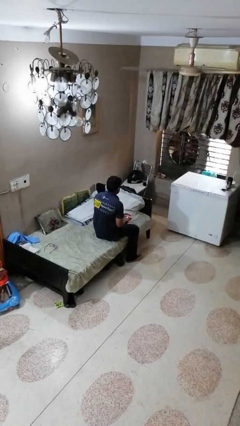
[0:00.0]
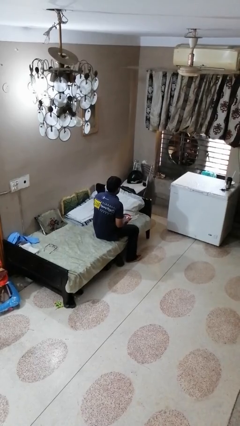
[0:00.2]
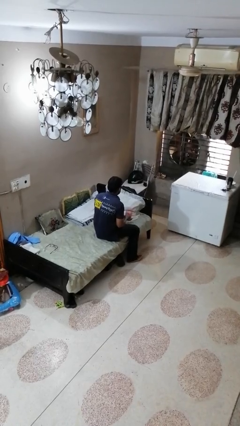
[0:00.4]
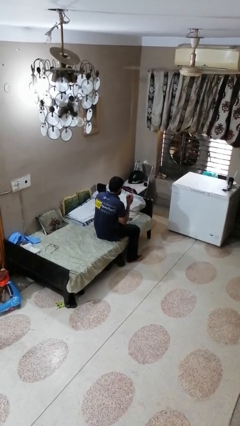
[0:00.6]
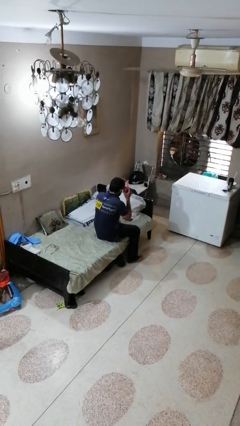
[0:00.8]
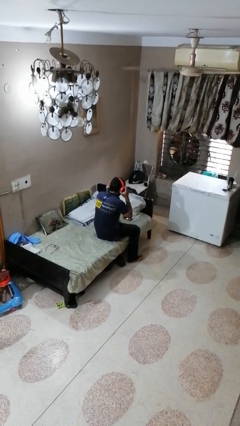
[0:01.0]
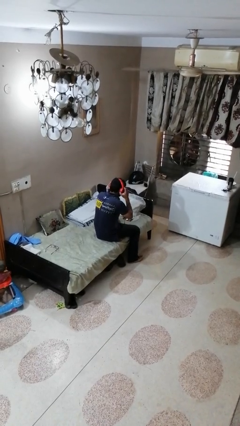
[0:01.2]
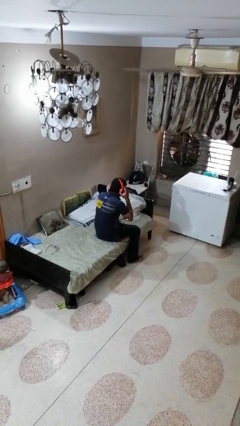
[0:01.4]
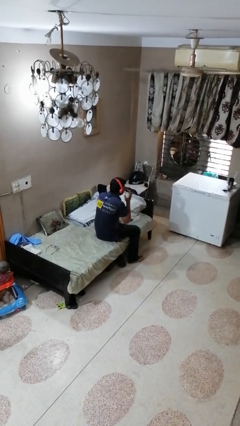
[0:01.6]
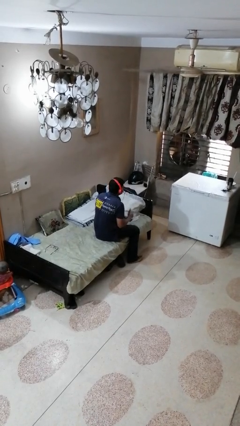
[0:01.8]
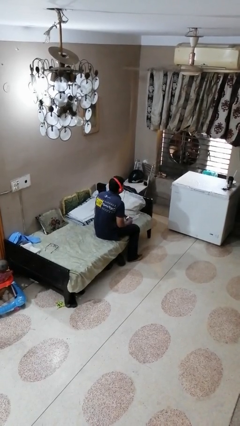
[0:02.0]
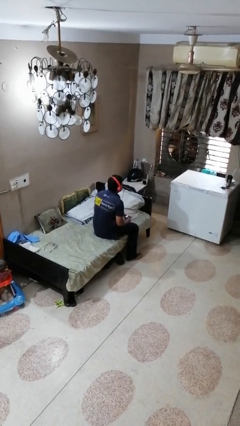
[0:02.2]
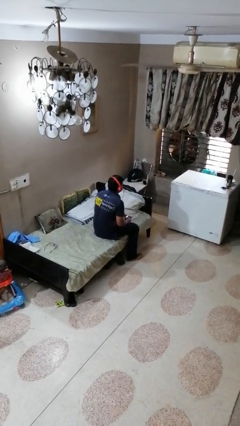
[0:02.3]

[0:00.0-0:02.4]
person puts on headphones

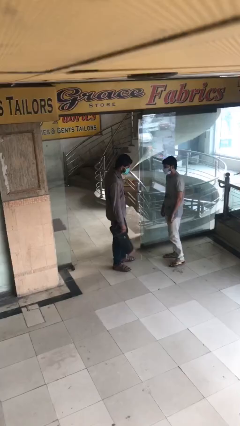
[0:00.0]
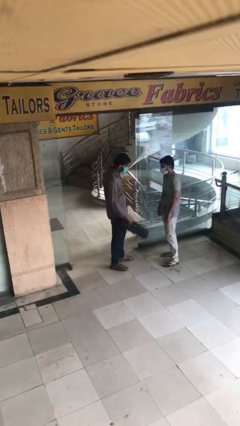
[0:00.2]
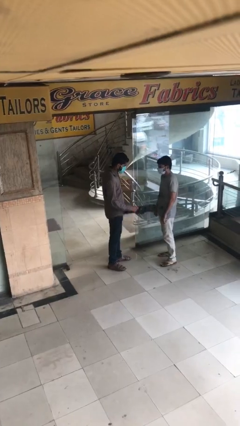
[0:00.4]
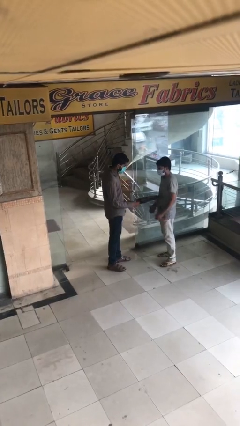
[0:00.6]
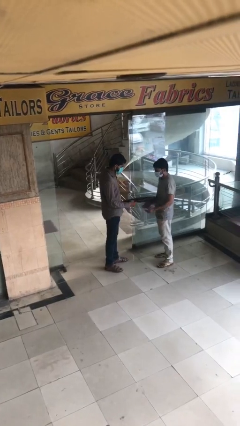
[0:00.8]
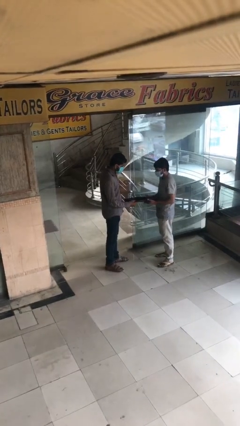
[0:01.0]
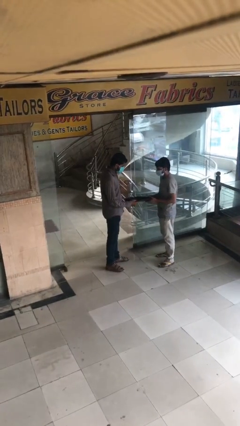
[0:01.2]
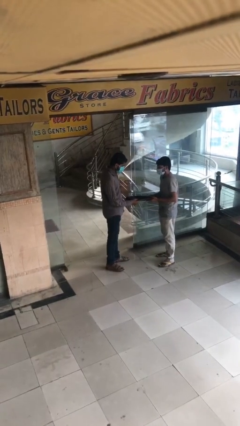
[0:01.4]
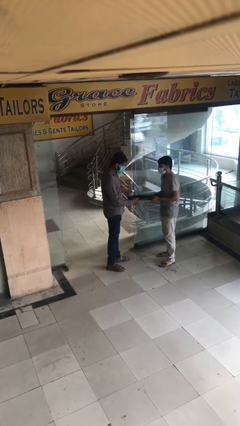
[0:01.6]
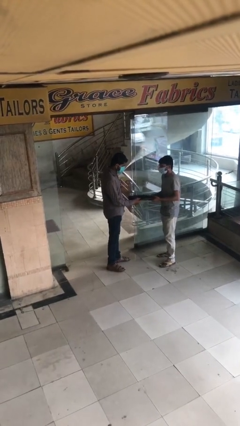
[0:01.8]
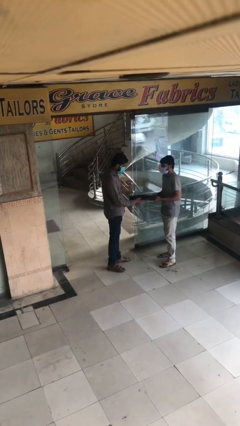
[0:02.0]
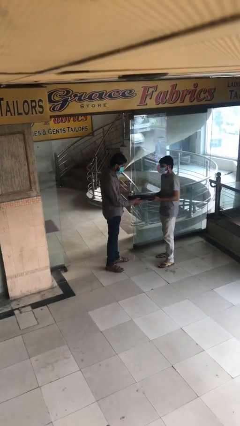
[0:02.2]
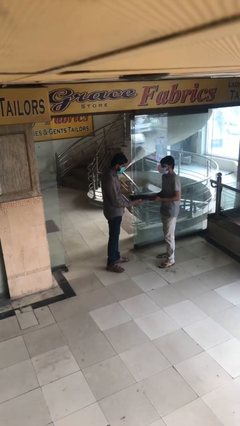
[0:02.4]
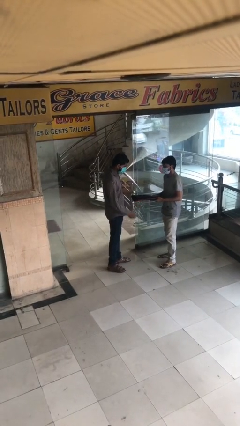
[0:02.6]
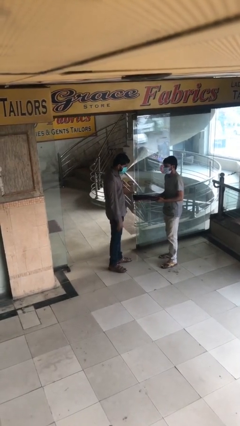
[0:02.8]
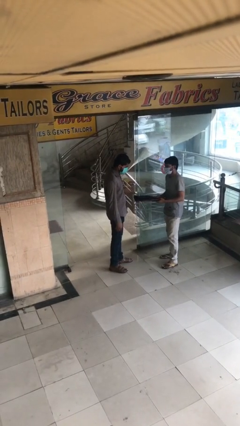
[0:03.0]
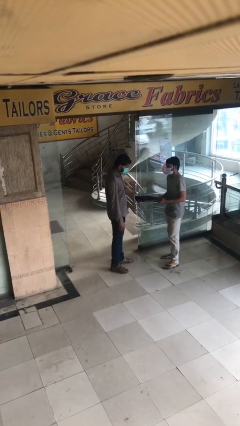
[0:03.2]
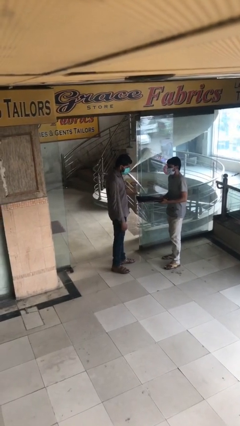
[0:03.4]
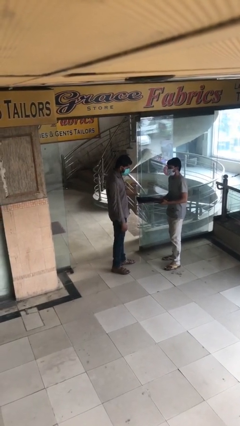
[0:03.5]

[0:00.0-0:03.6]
person transfers object to person

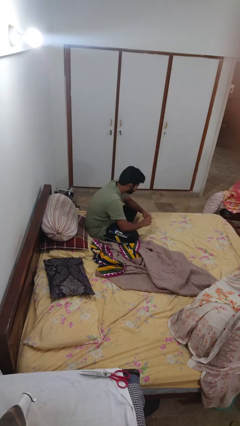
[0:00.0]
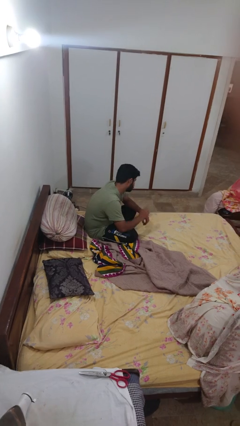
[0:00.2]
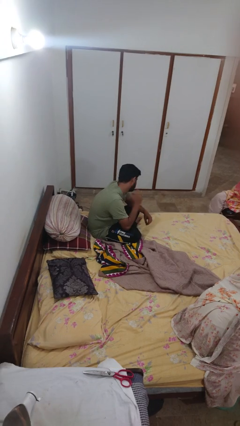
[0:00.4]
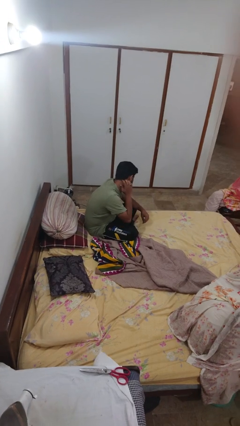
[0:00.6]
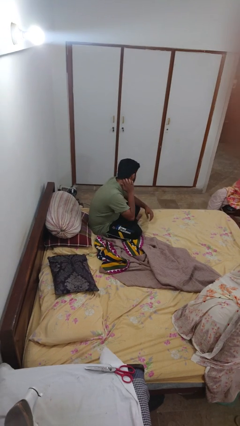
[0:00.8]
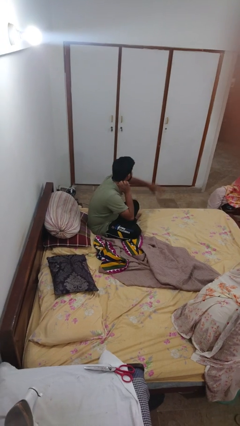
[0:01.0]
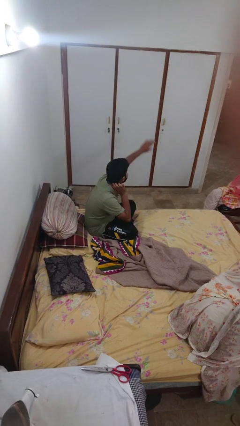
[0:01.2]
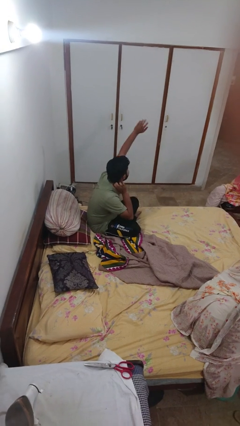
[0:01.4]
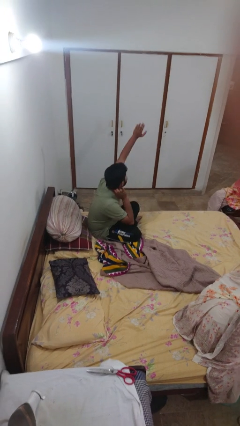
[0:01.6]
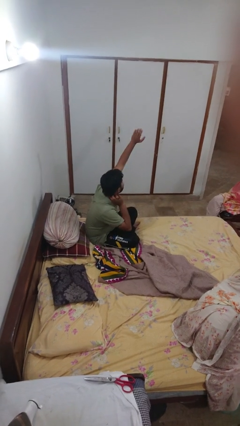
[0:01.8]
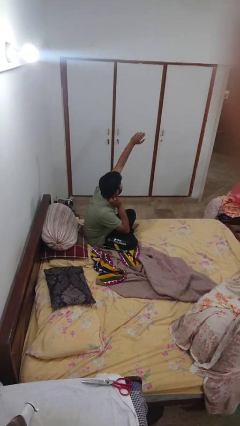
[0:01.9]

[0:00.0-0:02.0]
person waves at person

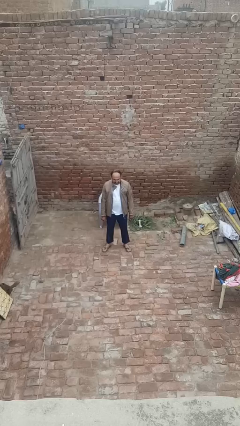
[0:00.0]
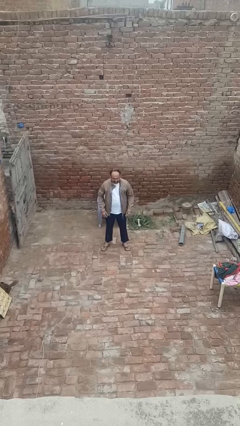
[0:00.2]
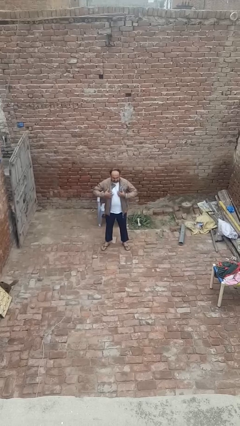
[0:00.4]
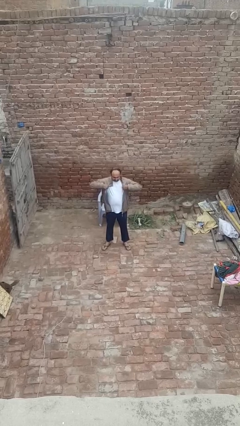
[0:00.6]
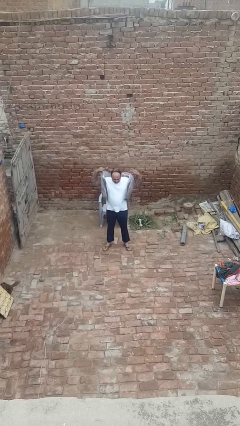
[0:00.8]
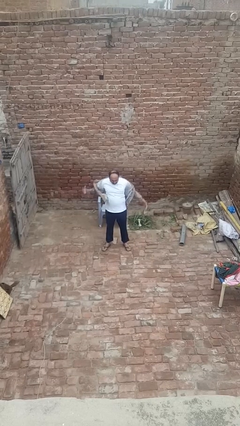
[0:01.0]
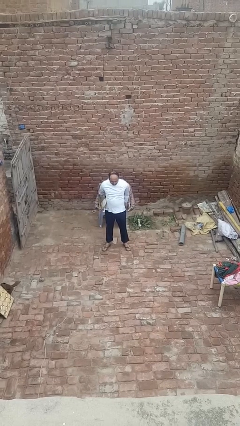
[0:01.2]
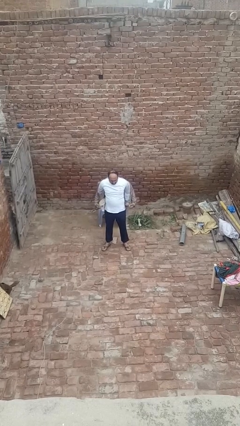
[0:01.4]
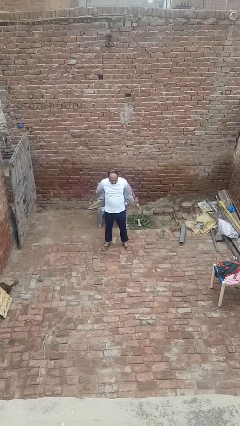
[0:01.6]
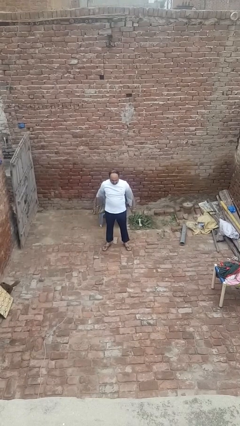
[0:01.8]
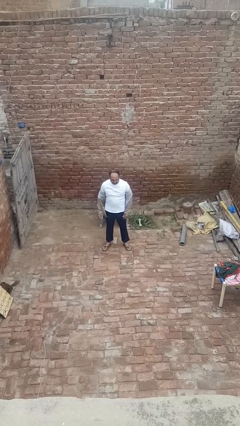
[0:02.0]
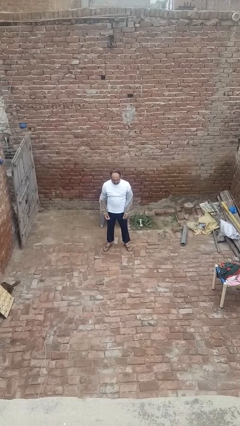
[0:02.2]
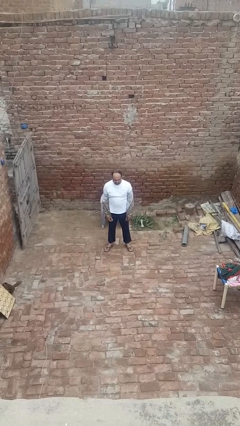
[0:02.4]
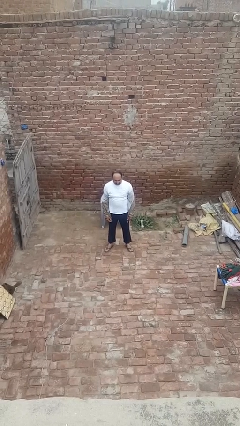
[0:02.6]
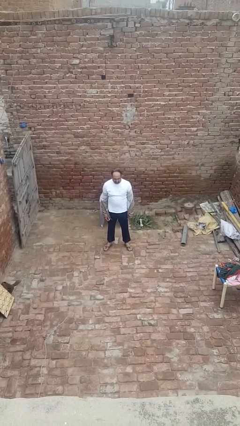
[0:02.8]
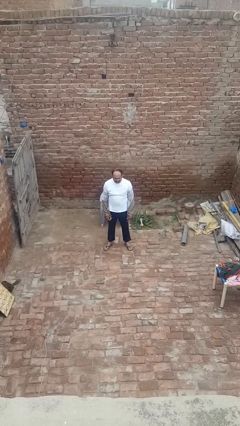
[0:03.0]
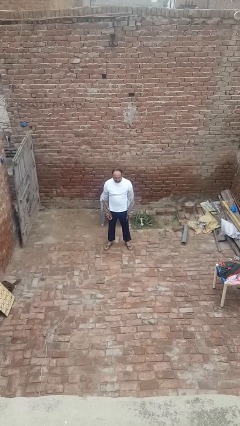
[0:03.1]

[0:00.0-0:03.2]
person takes off jacket

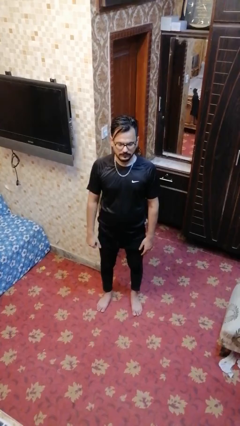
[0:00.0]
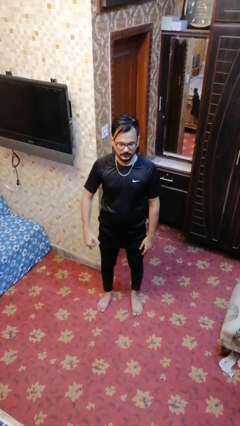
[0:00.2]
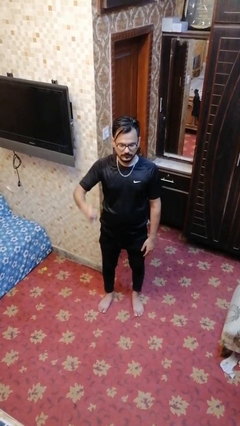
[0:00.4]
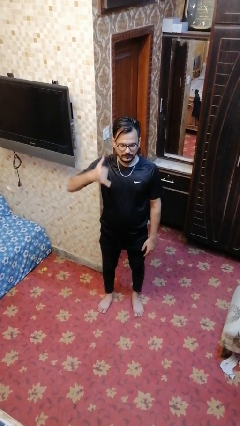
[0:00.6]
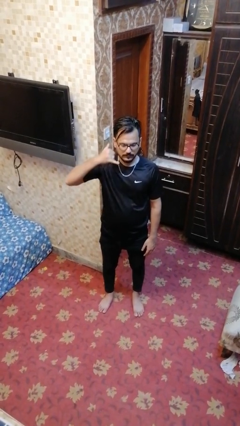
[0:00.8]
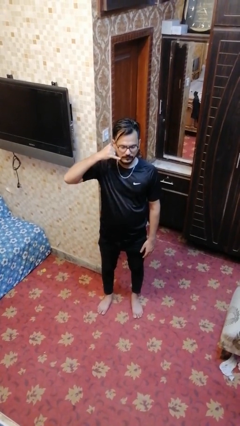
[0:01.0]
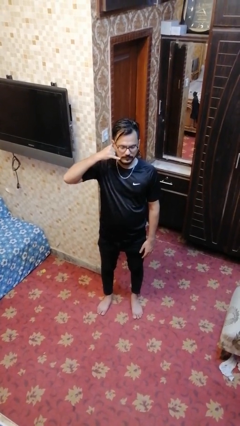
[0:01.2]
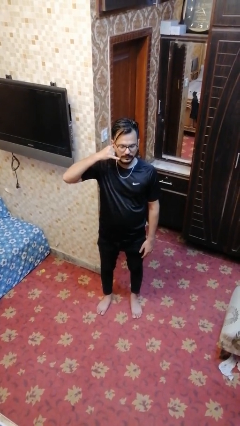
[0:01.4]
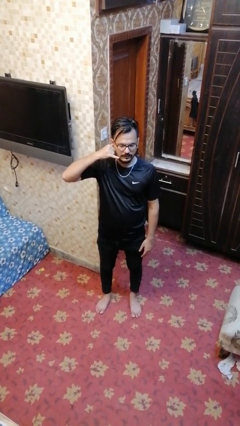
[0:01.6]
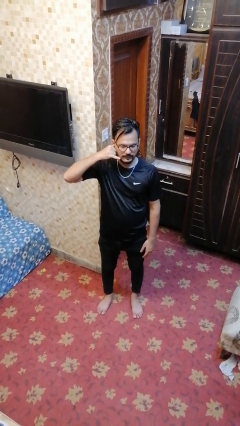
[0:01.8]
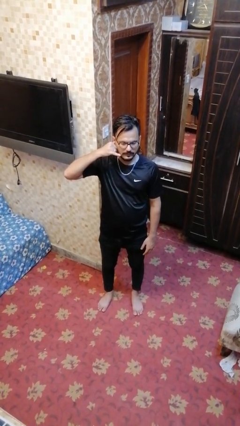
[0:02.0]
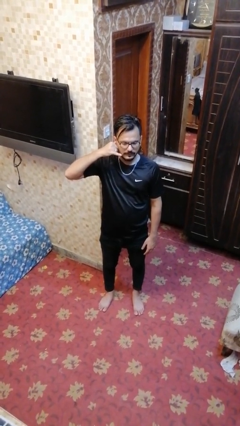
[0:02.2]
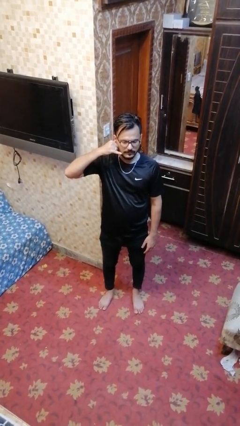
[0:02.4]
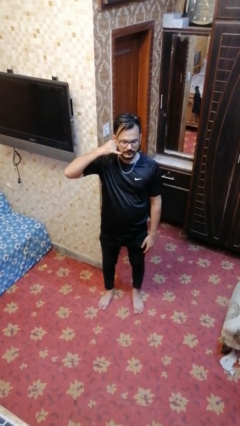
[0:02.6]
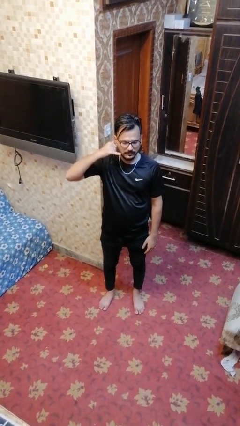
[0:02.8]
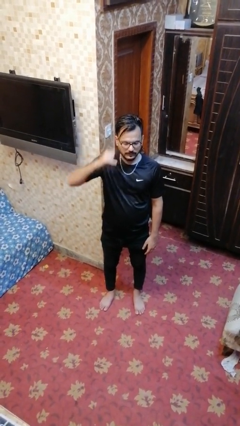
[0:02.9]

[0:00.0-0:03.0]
person gestures call me

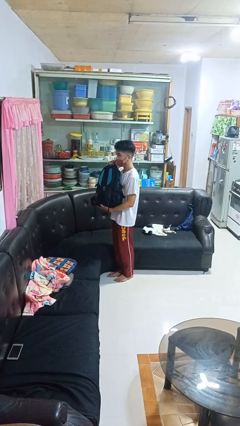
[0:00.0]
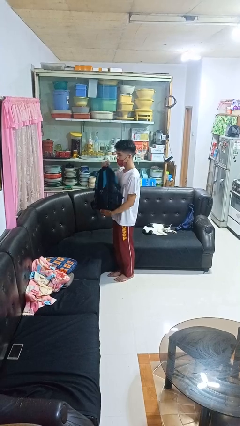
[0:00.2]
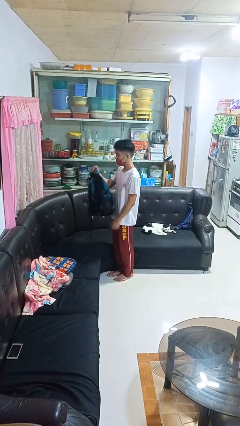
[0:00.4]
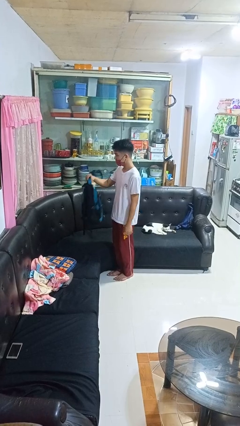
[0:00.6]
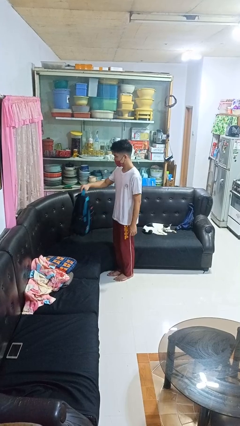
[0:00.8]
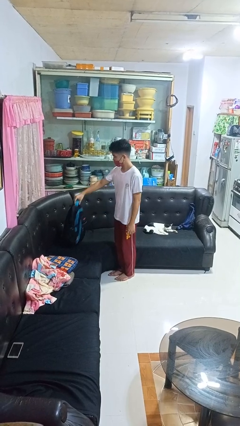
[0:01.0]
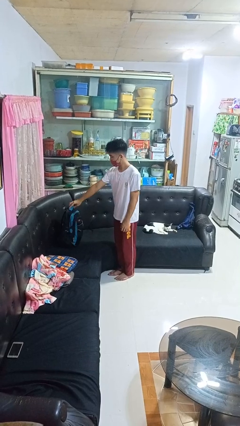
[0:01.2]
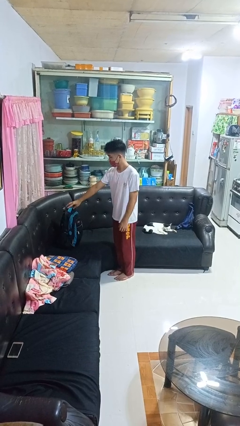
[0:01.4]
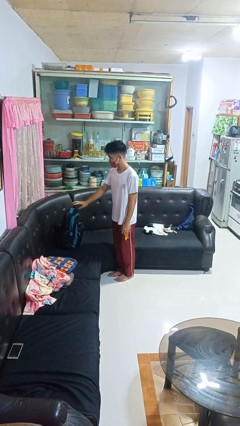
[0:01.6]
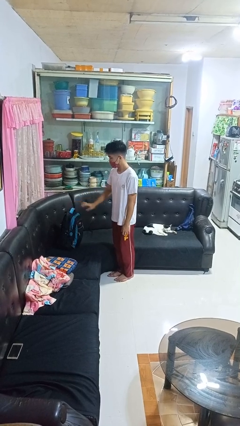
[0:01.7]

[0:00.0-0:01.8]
person puts down object on couch

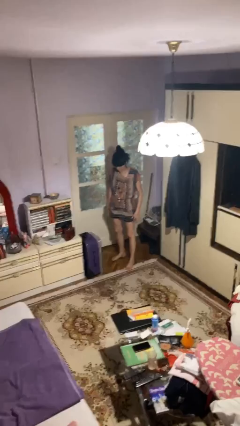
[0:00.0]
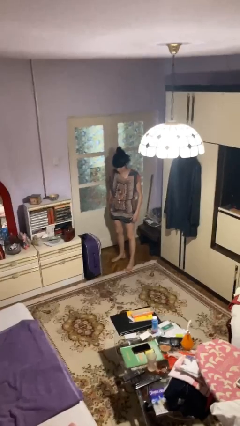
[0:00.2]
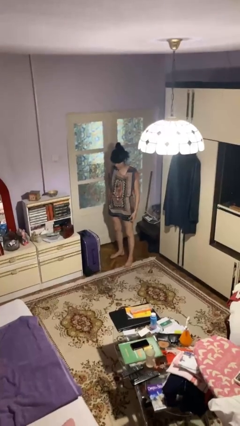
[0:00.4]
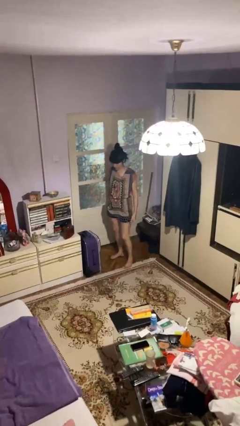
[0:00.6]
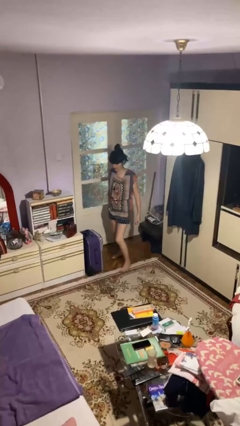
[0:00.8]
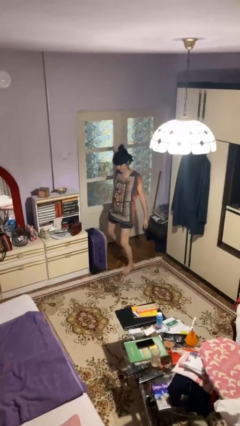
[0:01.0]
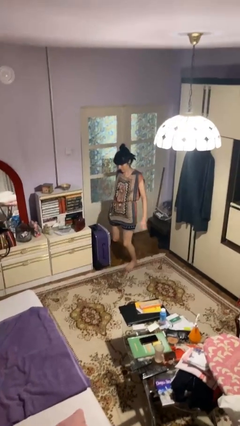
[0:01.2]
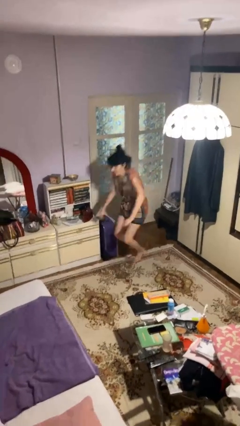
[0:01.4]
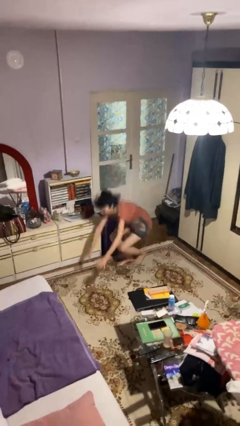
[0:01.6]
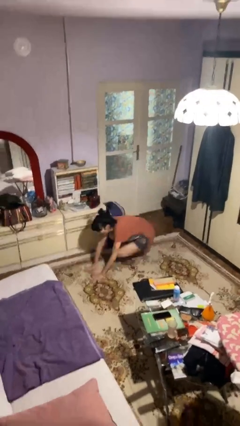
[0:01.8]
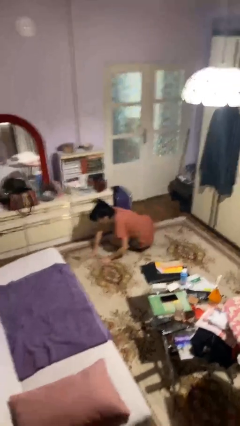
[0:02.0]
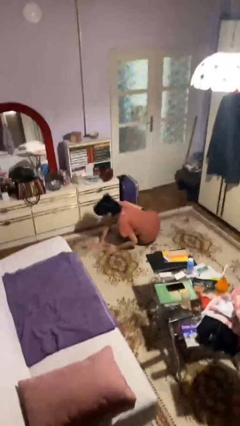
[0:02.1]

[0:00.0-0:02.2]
person trips on object on floor
